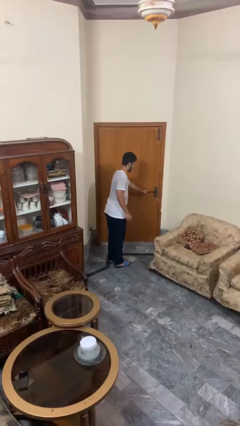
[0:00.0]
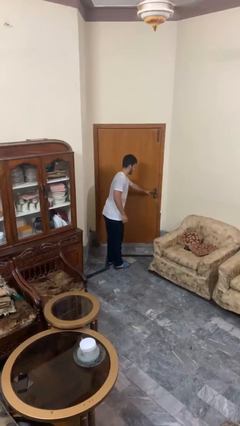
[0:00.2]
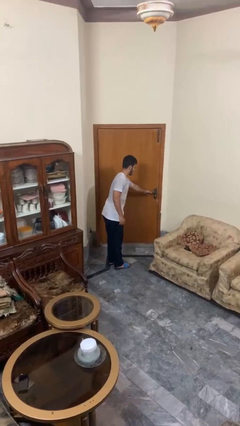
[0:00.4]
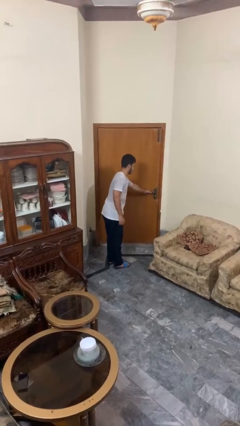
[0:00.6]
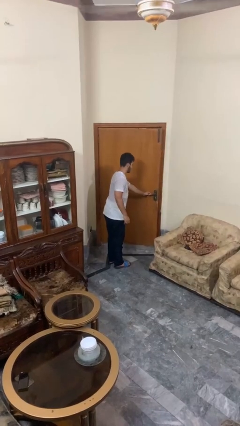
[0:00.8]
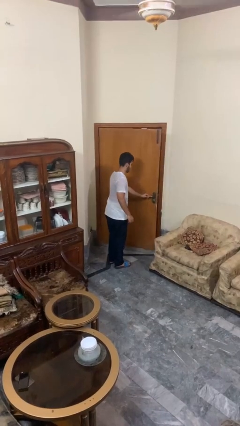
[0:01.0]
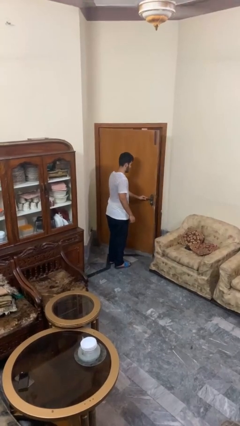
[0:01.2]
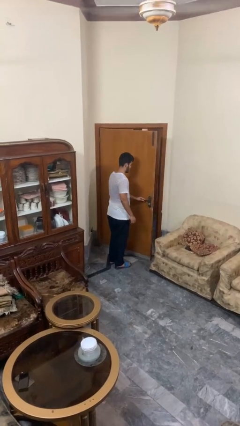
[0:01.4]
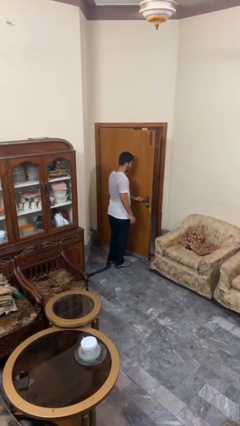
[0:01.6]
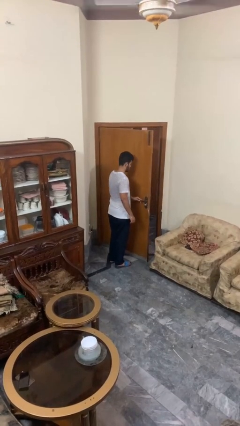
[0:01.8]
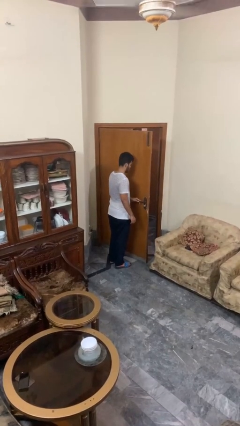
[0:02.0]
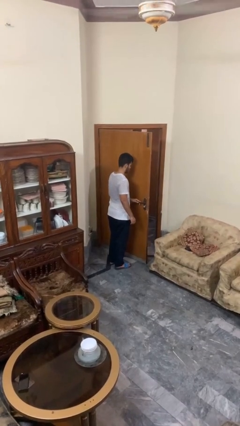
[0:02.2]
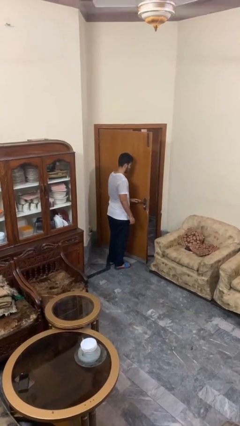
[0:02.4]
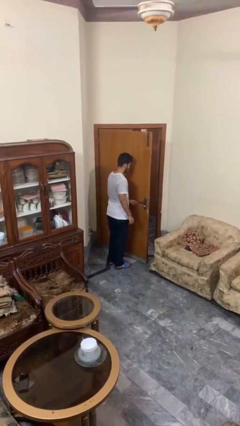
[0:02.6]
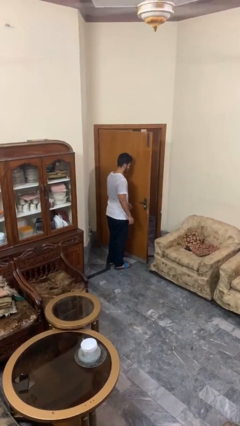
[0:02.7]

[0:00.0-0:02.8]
person opens facility door

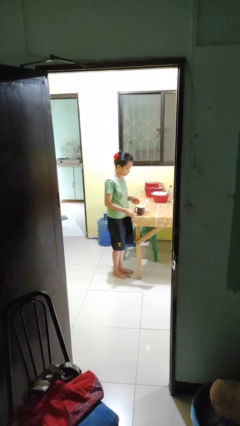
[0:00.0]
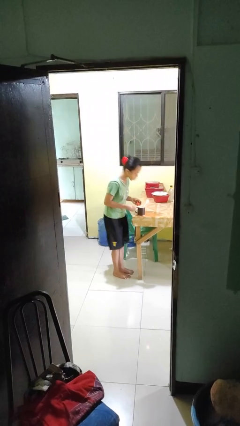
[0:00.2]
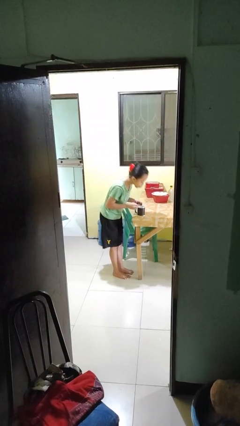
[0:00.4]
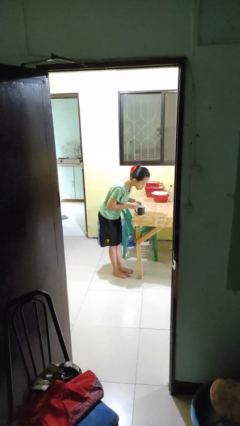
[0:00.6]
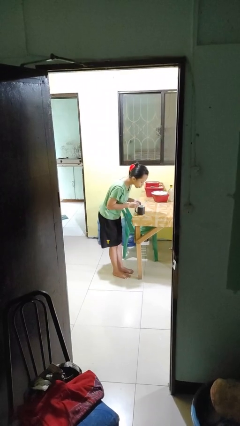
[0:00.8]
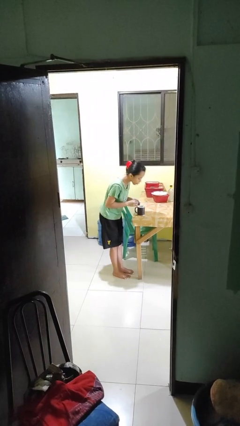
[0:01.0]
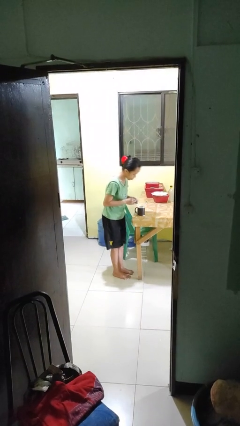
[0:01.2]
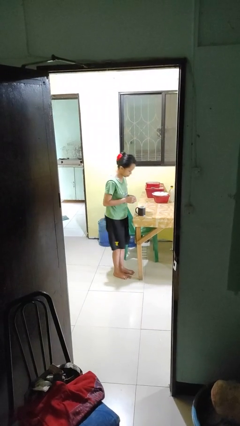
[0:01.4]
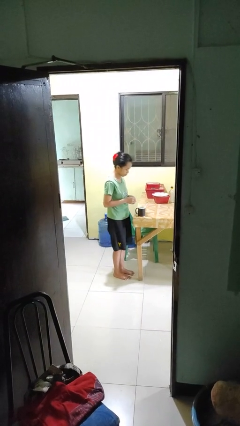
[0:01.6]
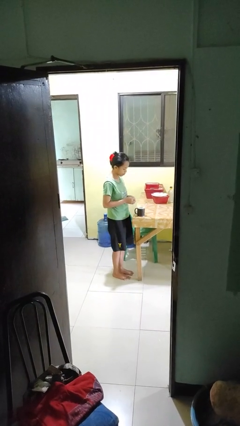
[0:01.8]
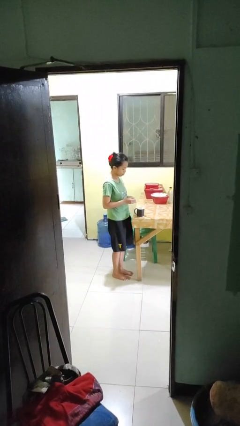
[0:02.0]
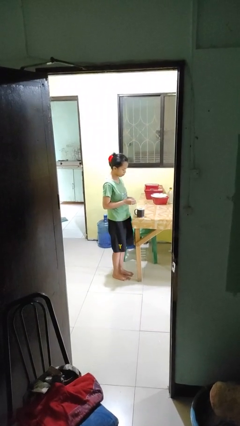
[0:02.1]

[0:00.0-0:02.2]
person extinguishes candle

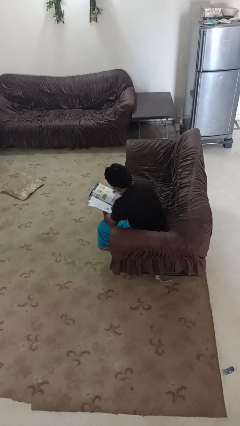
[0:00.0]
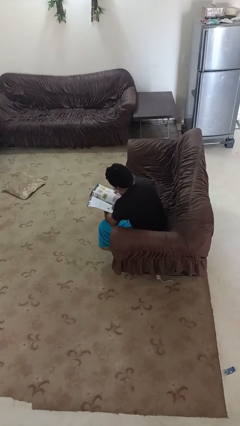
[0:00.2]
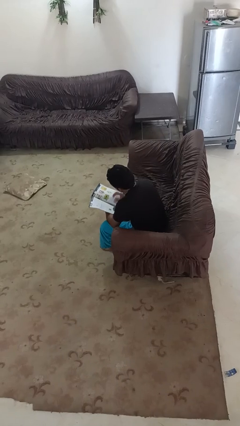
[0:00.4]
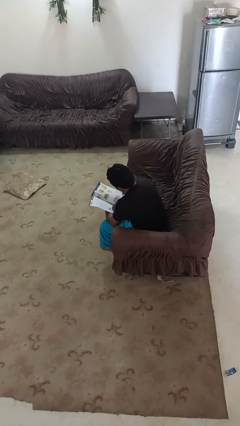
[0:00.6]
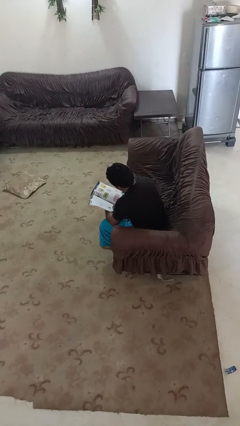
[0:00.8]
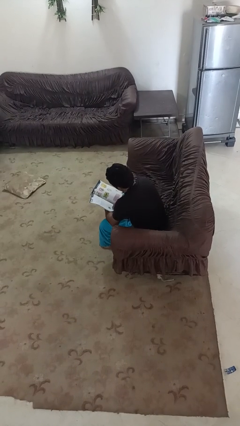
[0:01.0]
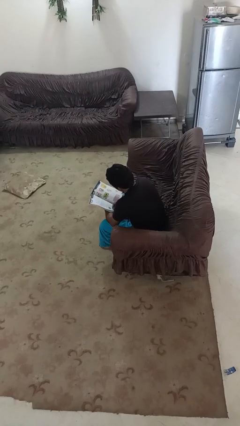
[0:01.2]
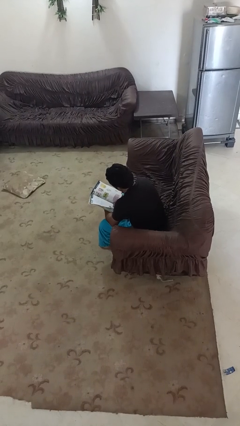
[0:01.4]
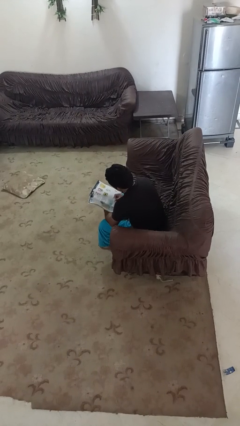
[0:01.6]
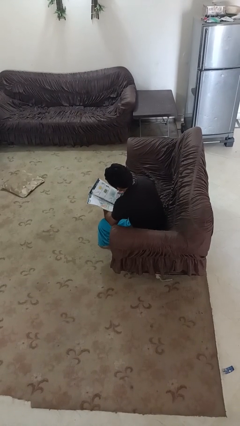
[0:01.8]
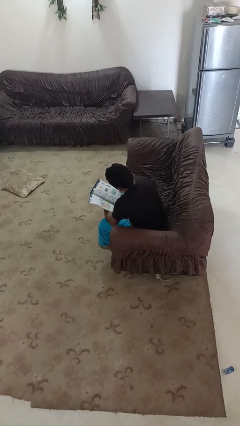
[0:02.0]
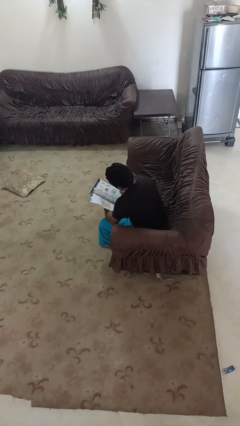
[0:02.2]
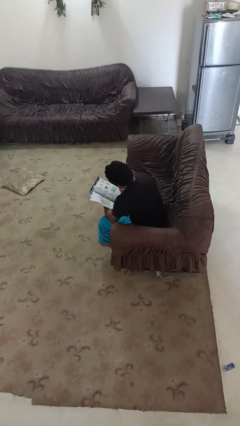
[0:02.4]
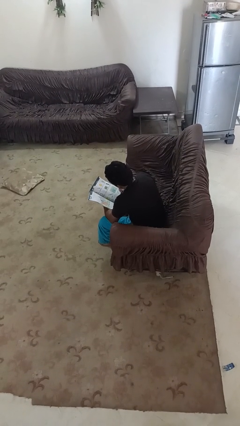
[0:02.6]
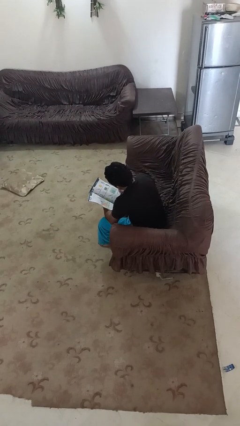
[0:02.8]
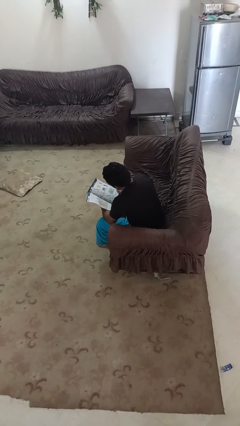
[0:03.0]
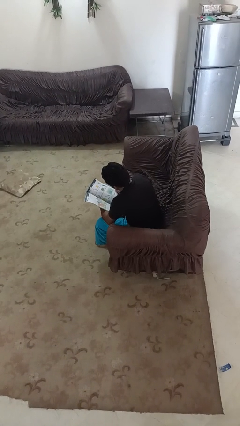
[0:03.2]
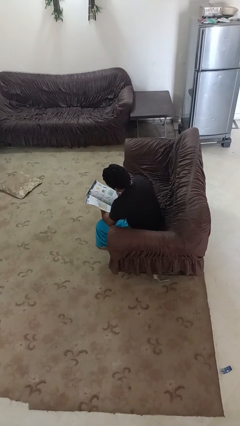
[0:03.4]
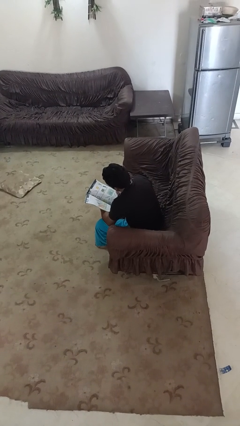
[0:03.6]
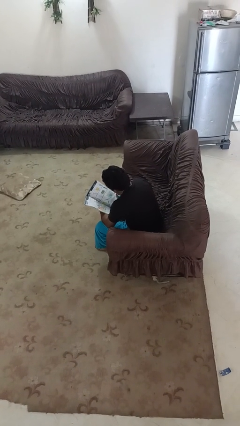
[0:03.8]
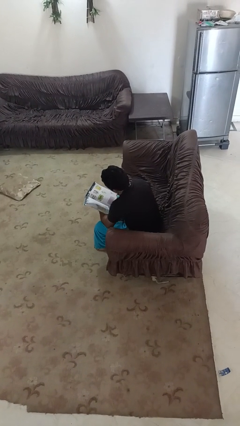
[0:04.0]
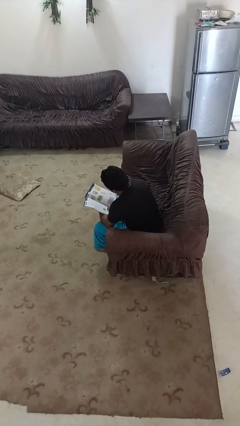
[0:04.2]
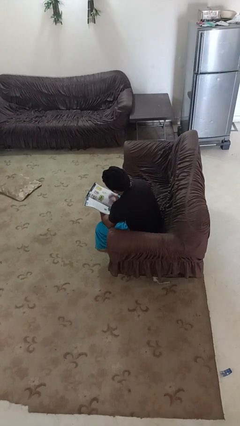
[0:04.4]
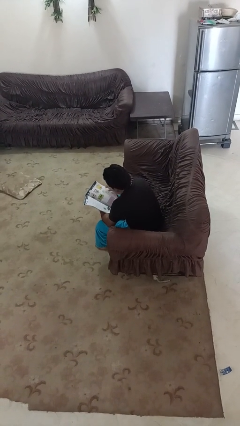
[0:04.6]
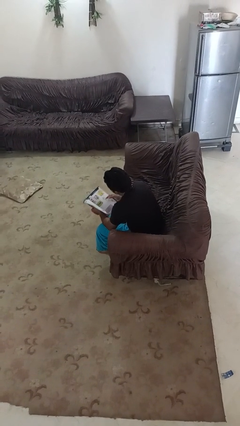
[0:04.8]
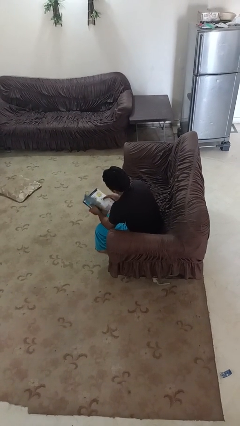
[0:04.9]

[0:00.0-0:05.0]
person reads book

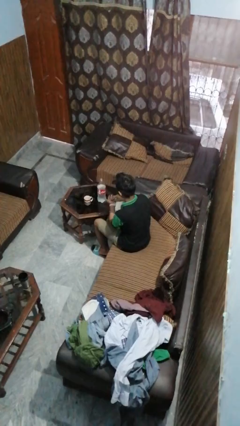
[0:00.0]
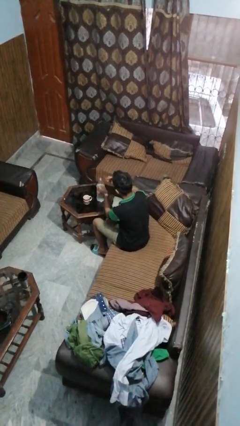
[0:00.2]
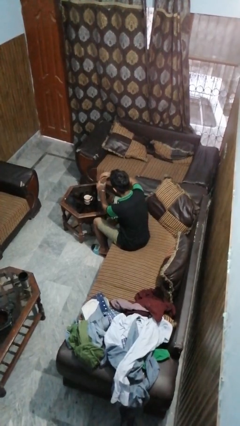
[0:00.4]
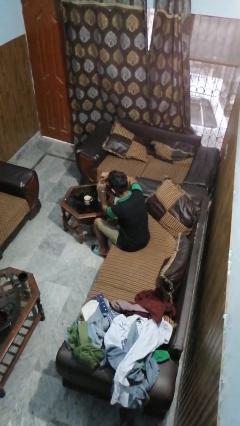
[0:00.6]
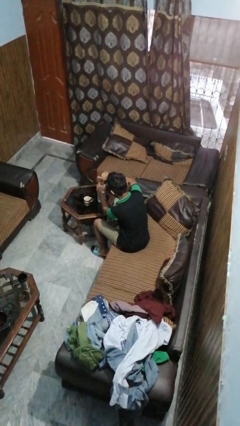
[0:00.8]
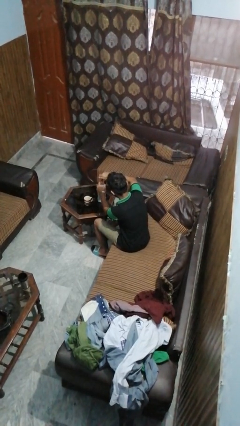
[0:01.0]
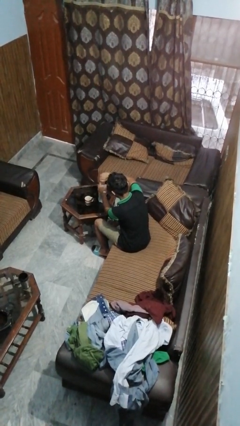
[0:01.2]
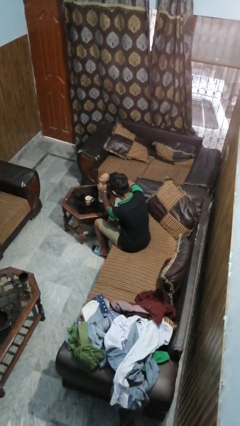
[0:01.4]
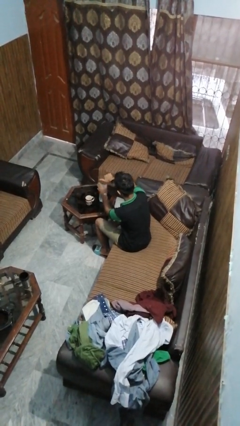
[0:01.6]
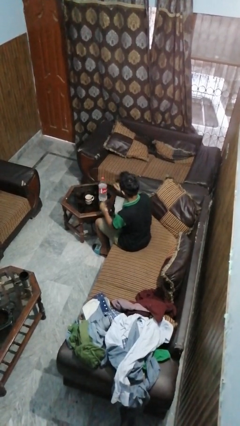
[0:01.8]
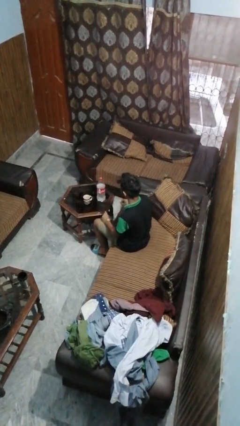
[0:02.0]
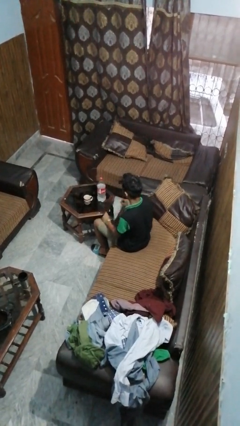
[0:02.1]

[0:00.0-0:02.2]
person screws lid to bottle

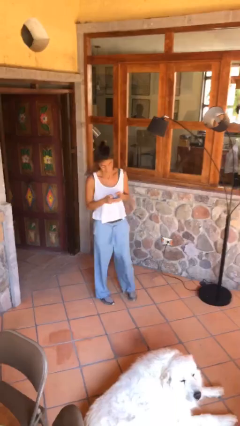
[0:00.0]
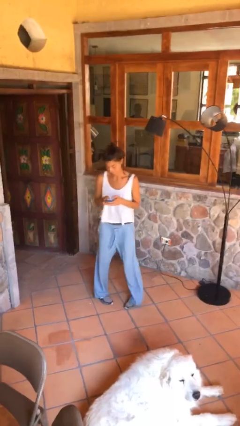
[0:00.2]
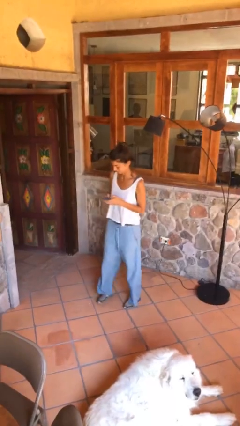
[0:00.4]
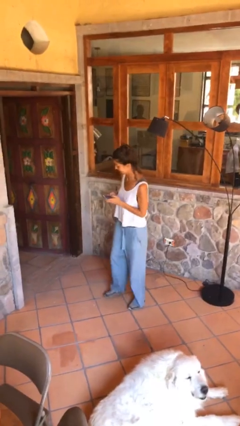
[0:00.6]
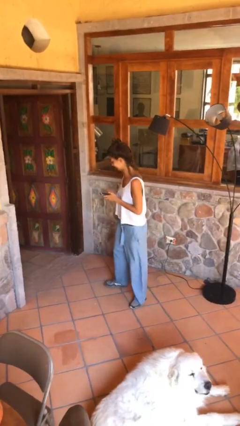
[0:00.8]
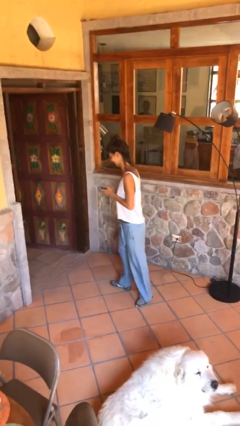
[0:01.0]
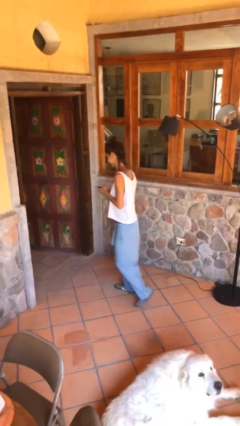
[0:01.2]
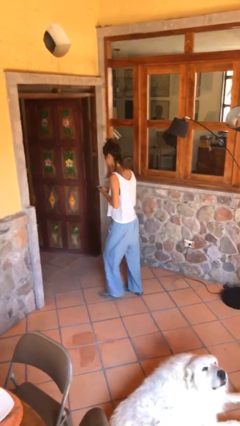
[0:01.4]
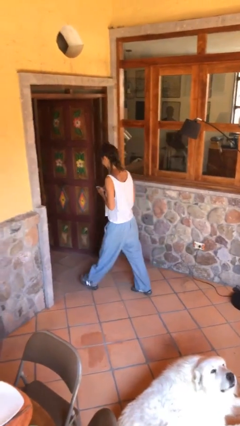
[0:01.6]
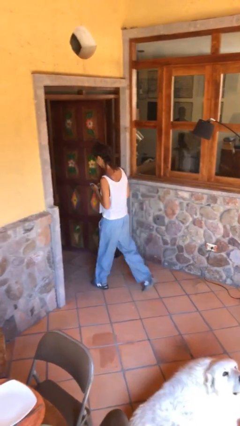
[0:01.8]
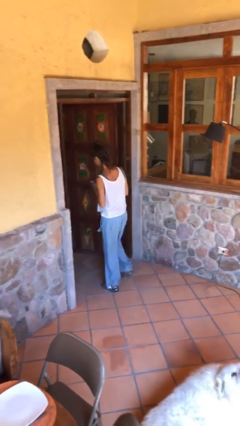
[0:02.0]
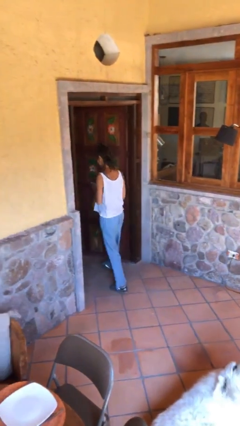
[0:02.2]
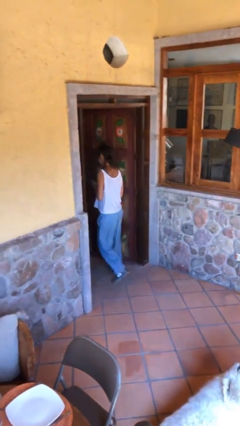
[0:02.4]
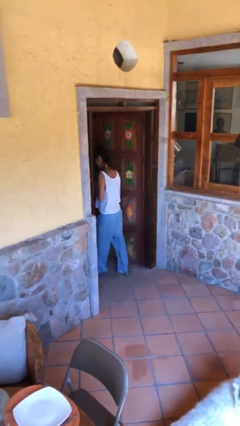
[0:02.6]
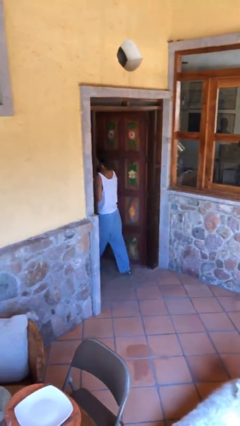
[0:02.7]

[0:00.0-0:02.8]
person exits scene through structure

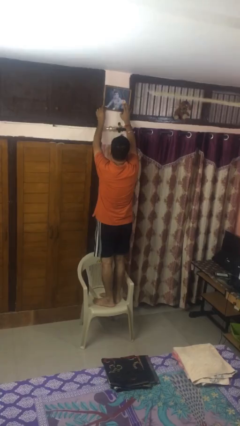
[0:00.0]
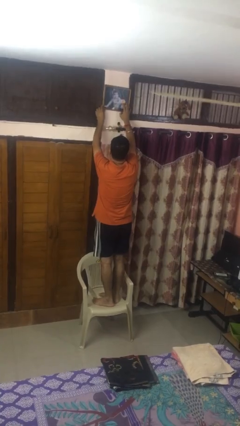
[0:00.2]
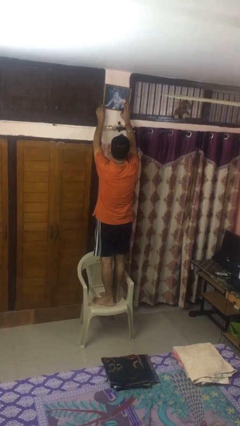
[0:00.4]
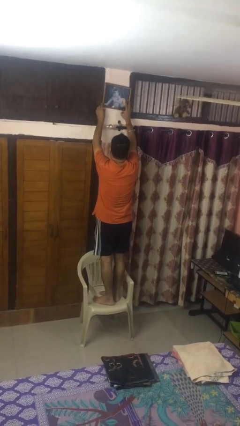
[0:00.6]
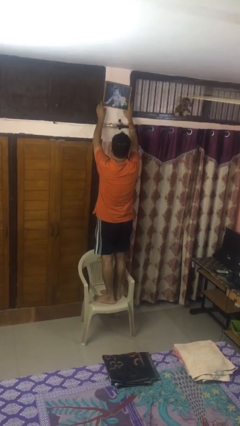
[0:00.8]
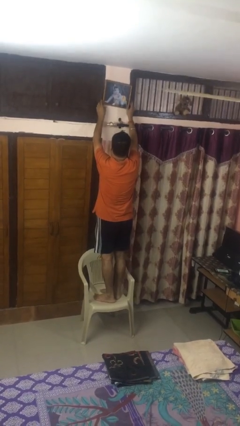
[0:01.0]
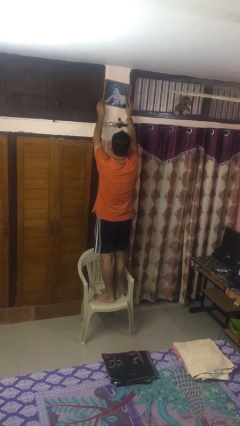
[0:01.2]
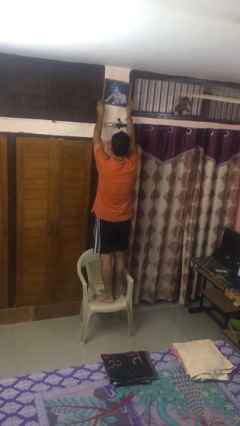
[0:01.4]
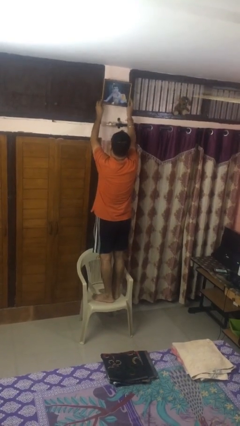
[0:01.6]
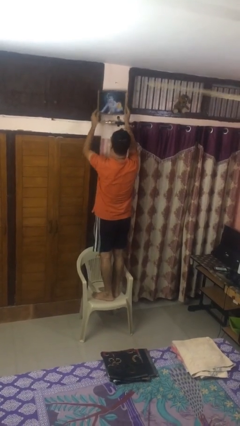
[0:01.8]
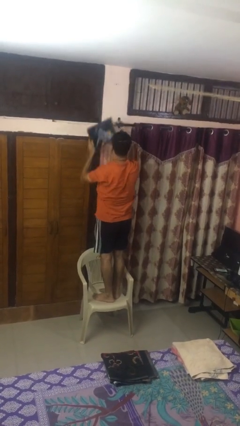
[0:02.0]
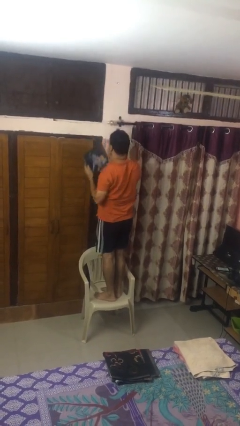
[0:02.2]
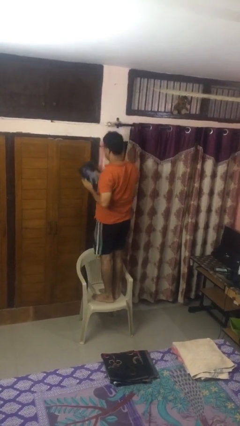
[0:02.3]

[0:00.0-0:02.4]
person takes down picture frame
